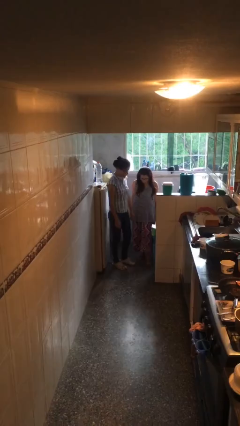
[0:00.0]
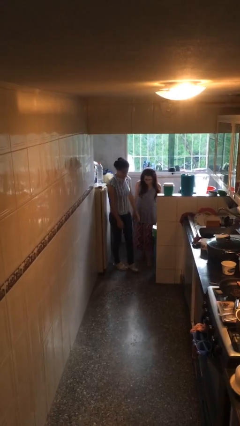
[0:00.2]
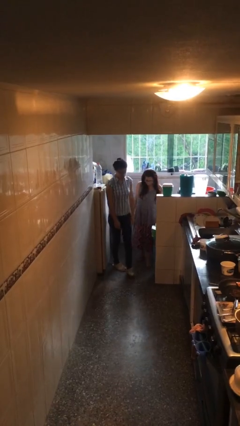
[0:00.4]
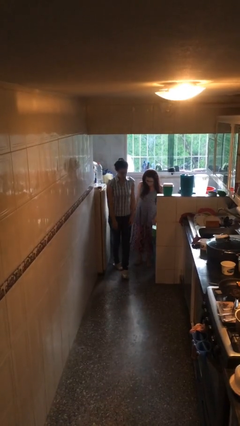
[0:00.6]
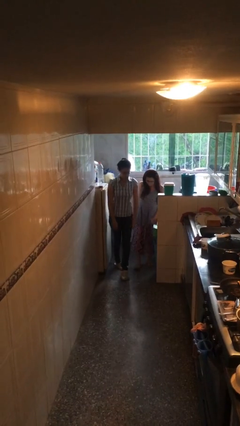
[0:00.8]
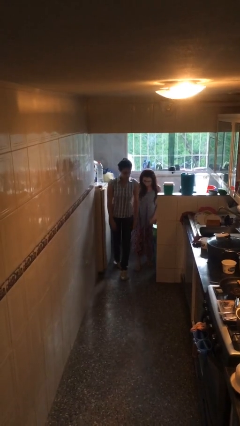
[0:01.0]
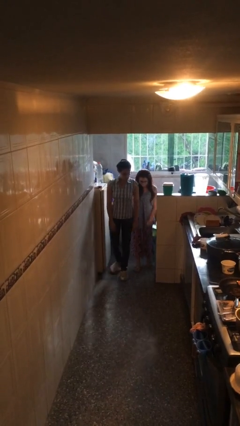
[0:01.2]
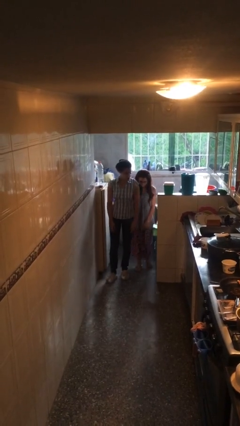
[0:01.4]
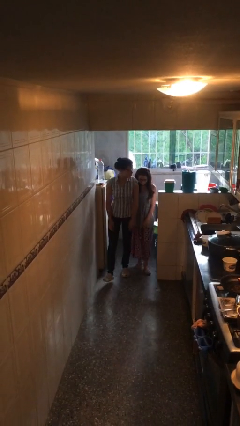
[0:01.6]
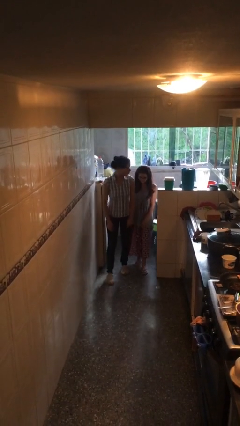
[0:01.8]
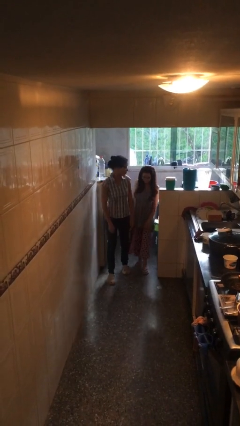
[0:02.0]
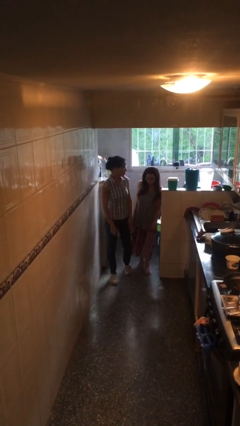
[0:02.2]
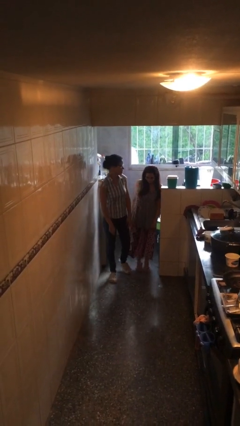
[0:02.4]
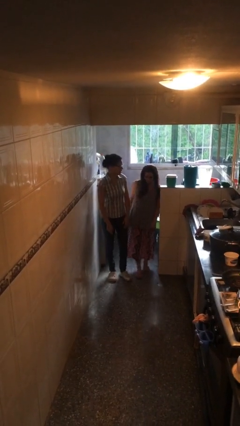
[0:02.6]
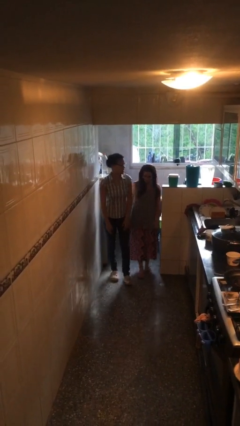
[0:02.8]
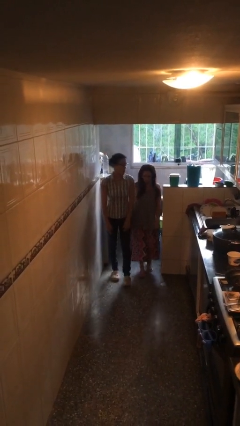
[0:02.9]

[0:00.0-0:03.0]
person talks to person

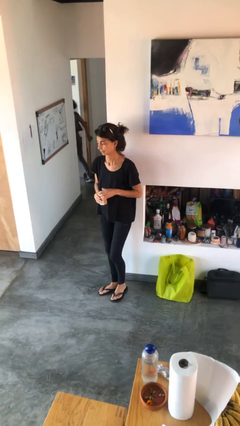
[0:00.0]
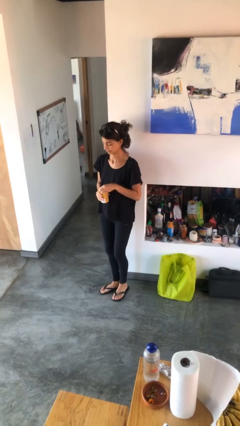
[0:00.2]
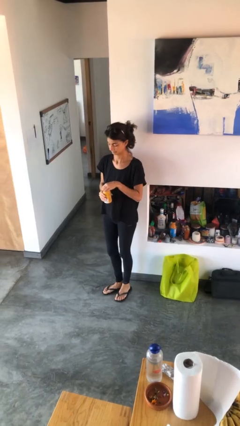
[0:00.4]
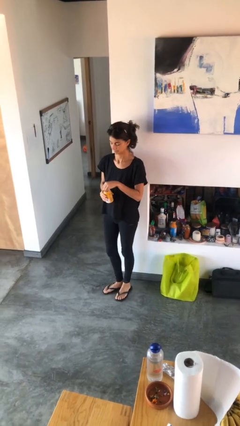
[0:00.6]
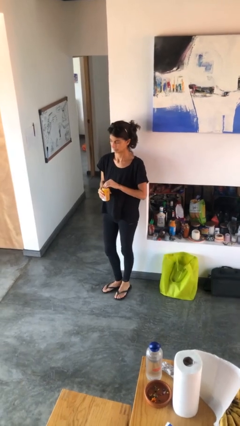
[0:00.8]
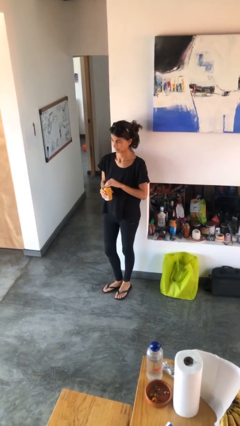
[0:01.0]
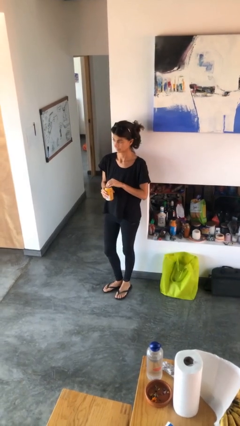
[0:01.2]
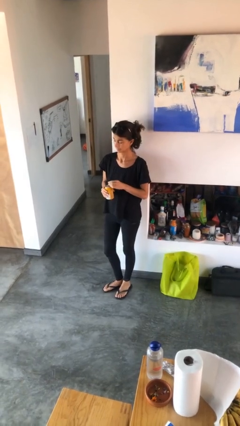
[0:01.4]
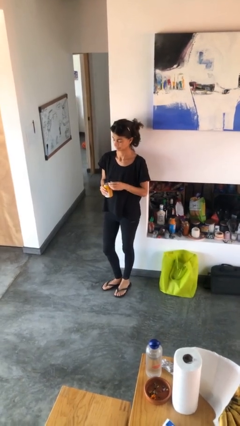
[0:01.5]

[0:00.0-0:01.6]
person opens beverage can

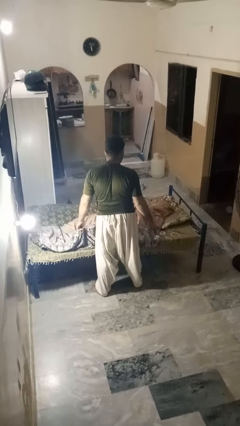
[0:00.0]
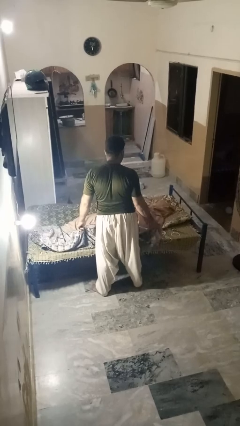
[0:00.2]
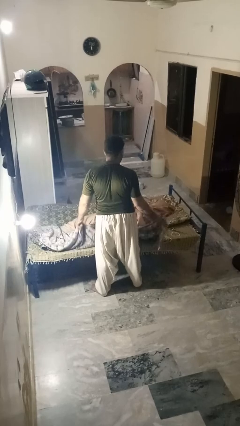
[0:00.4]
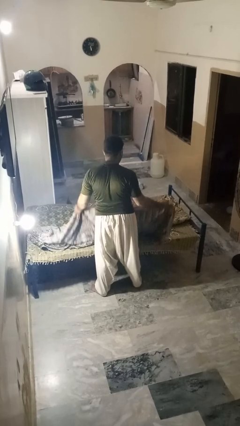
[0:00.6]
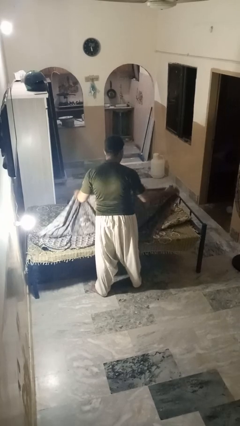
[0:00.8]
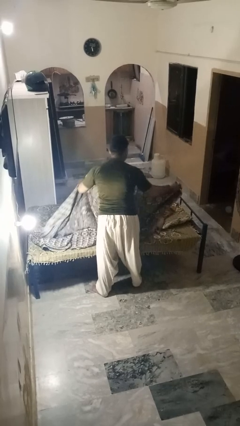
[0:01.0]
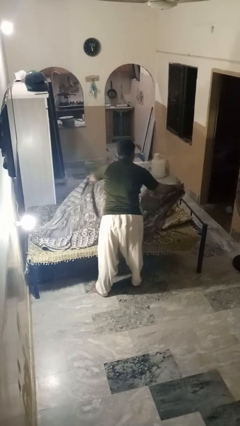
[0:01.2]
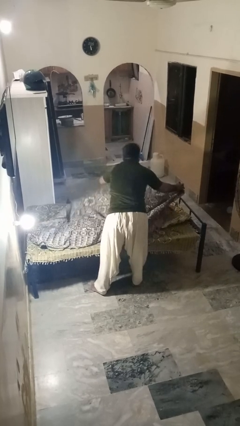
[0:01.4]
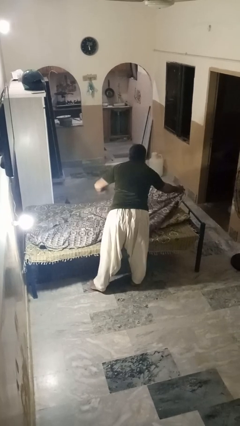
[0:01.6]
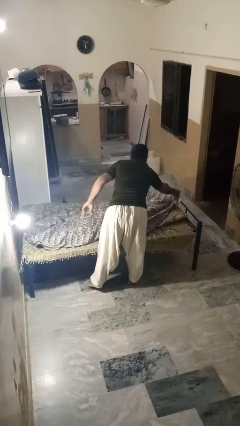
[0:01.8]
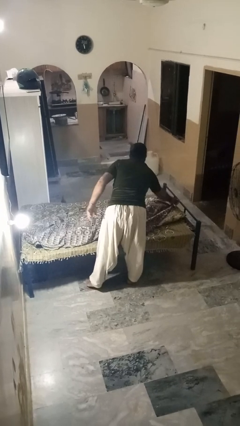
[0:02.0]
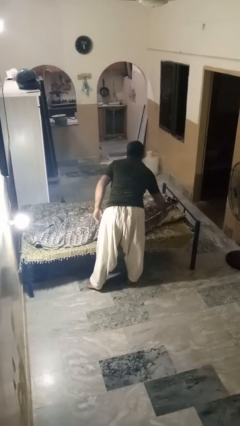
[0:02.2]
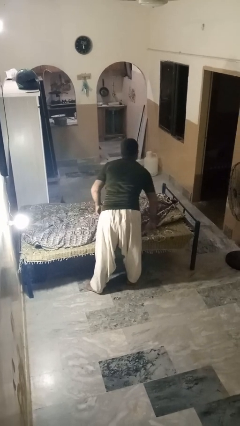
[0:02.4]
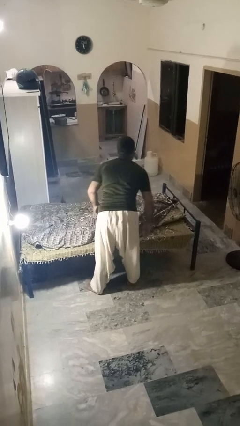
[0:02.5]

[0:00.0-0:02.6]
person covers friend with blanket

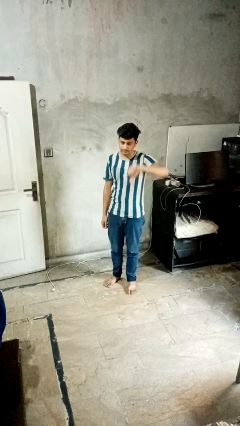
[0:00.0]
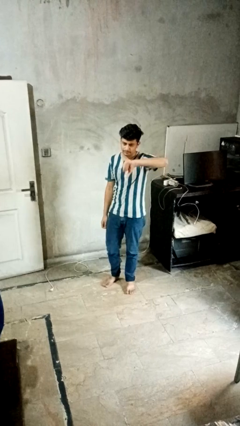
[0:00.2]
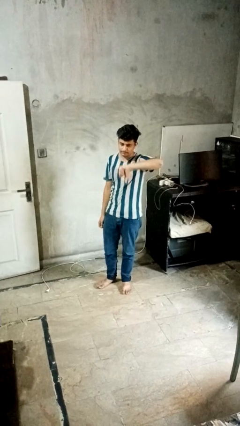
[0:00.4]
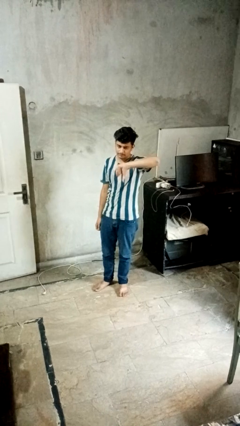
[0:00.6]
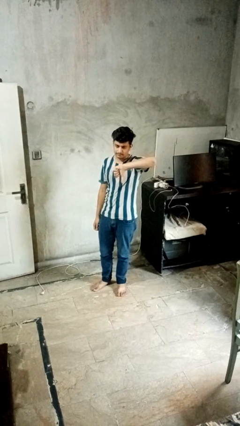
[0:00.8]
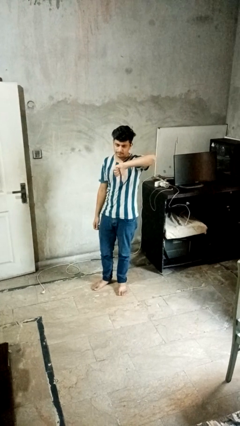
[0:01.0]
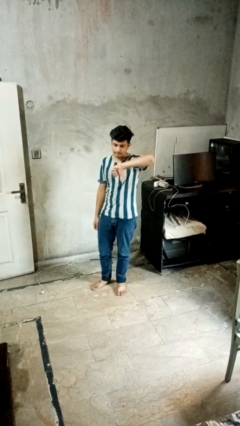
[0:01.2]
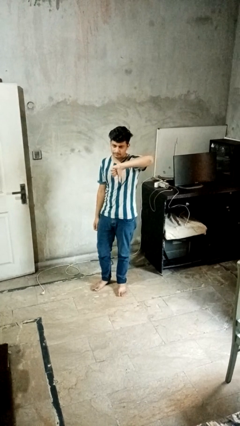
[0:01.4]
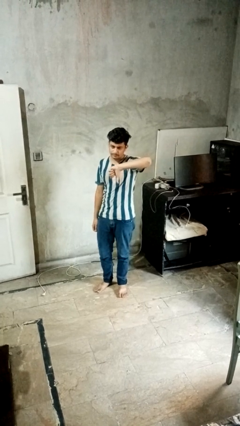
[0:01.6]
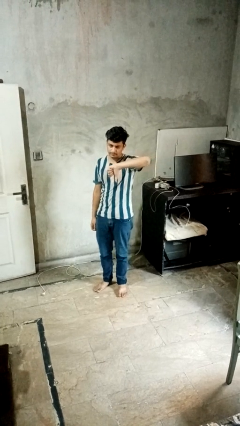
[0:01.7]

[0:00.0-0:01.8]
person gestures thumbs down

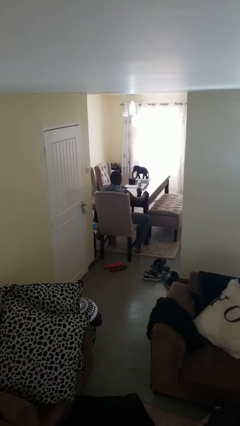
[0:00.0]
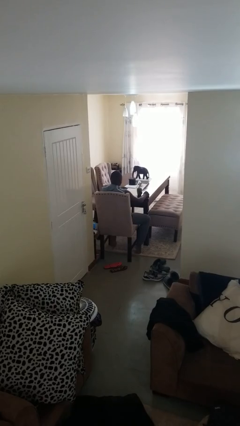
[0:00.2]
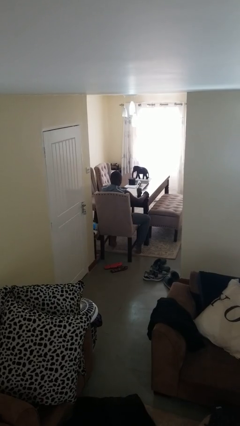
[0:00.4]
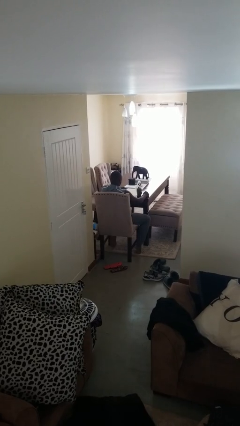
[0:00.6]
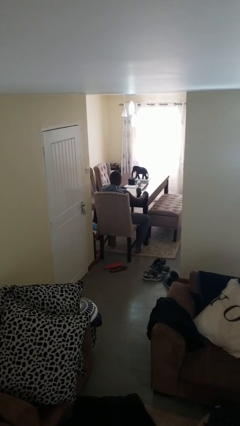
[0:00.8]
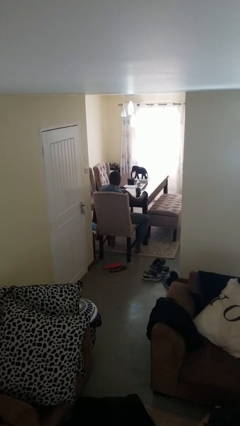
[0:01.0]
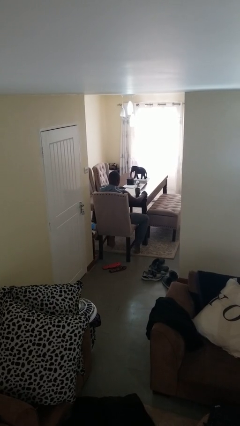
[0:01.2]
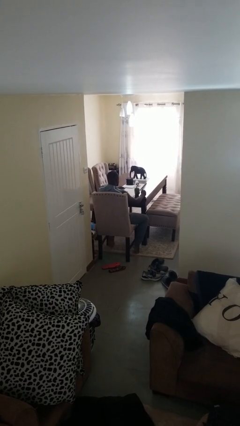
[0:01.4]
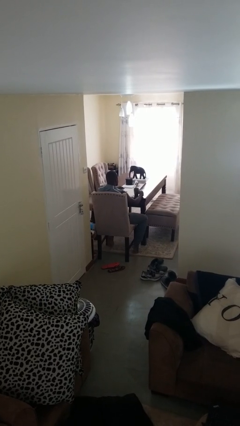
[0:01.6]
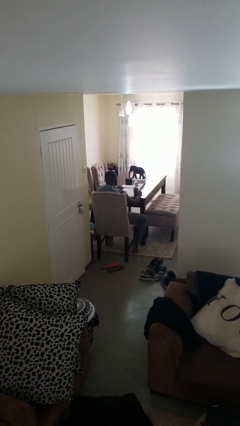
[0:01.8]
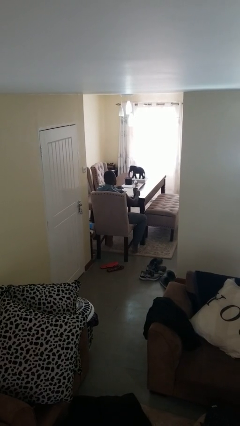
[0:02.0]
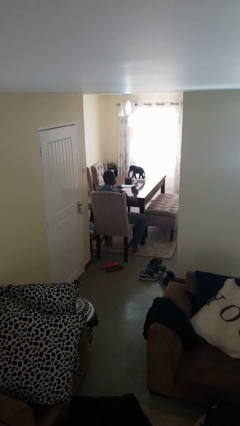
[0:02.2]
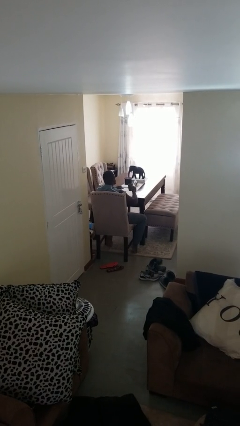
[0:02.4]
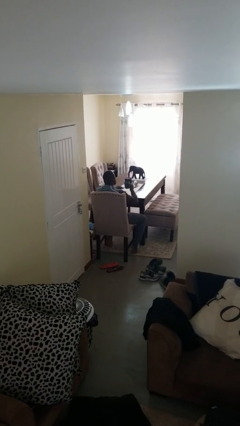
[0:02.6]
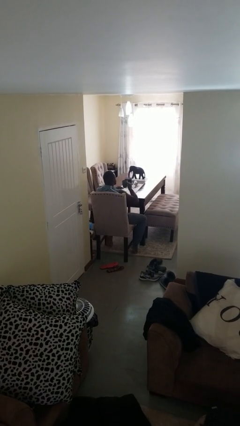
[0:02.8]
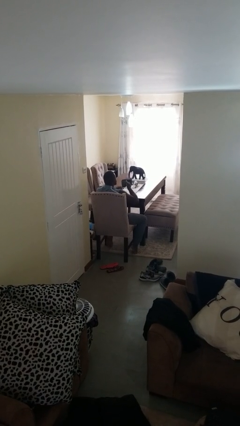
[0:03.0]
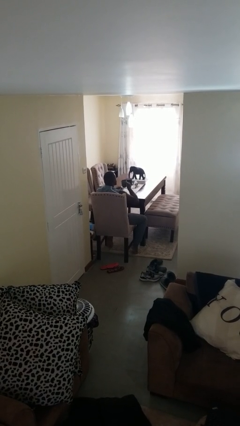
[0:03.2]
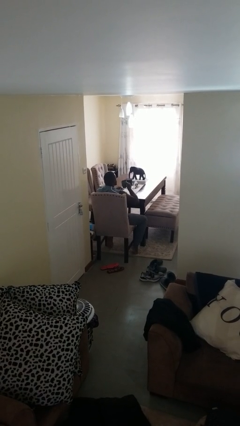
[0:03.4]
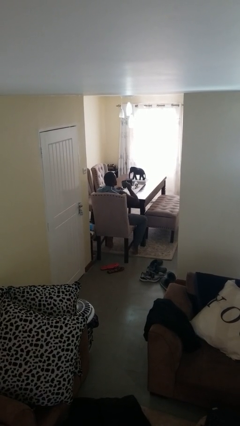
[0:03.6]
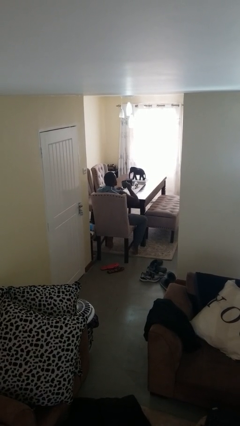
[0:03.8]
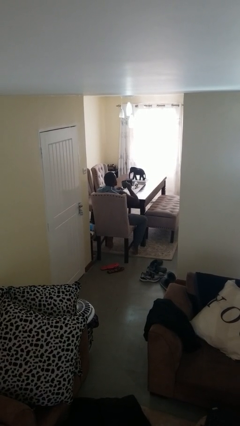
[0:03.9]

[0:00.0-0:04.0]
person picks up object from table

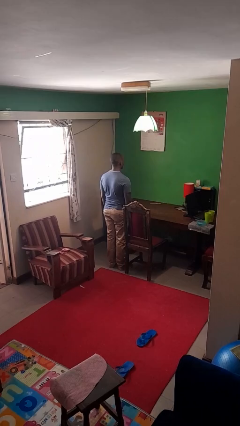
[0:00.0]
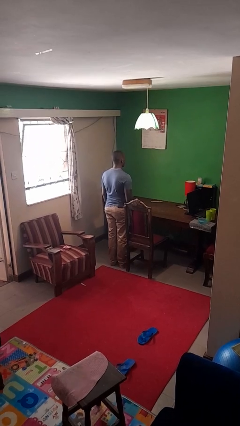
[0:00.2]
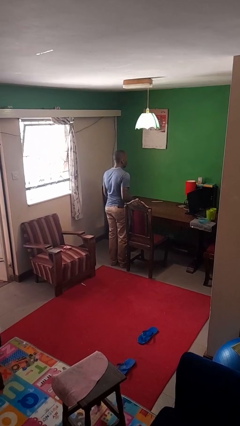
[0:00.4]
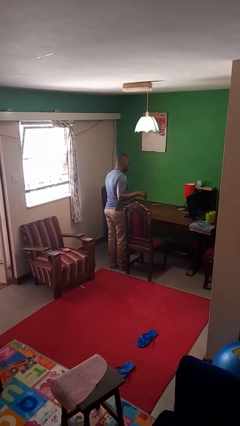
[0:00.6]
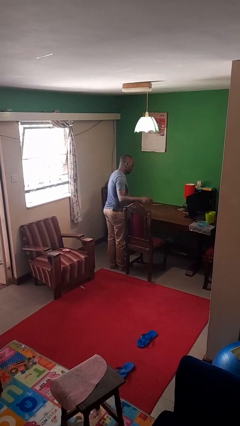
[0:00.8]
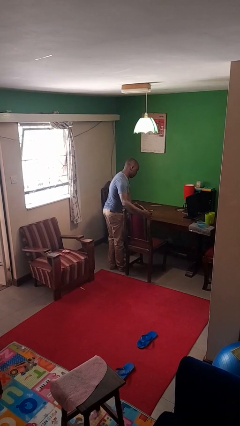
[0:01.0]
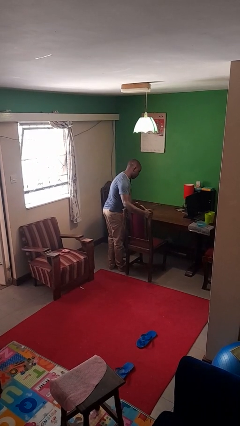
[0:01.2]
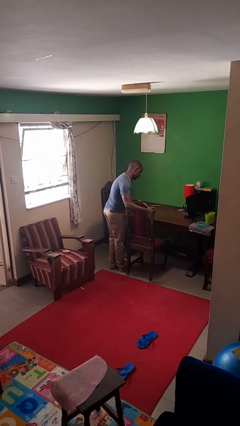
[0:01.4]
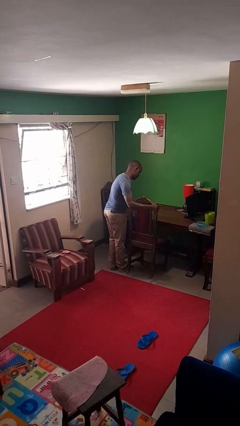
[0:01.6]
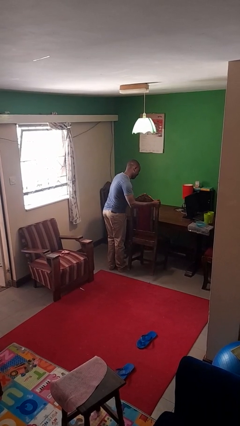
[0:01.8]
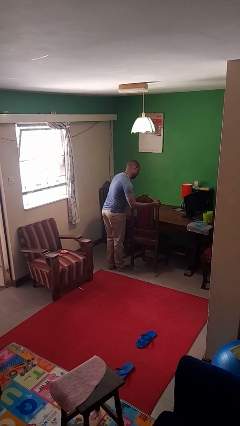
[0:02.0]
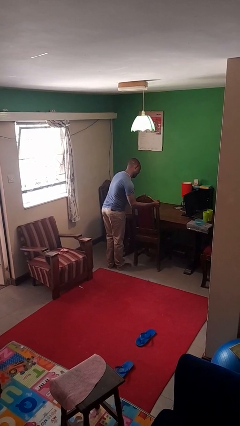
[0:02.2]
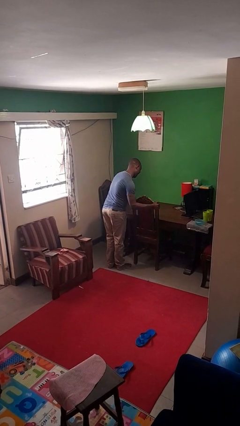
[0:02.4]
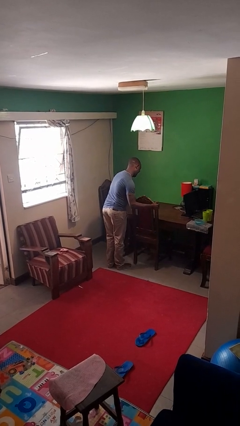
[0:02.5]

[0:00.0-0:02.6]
person pushes in chair

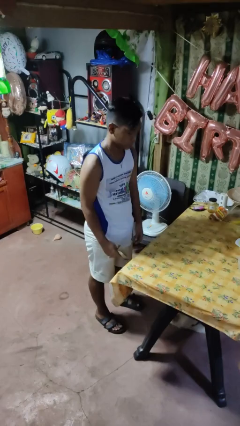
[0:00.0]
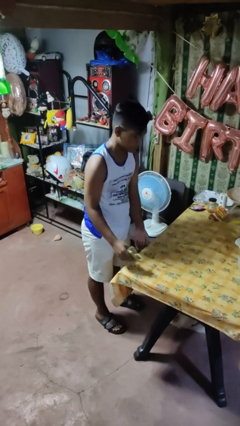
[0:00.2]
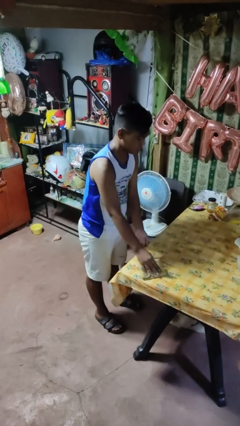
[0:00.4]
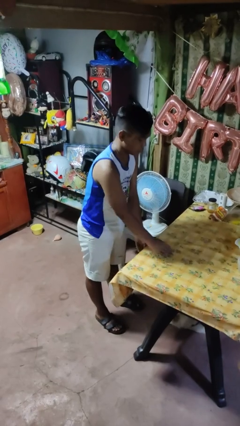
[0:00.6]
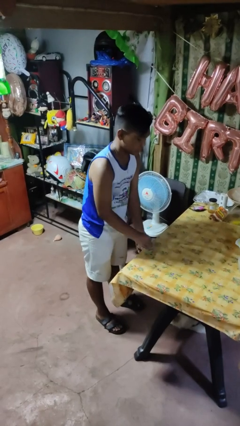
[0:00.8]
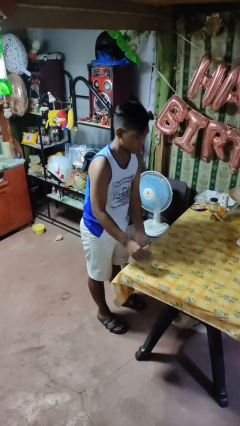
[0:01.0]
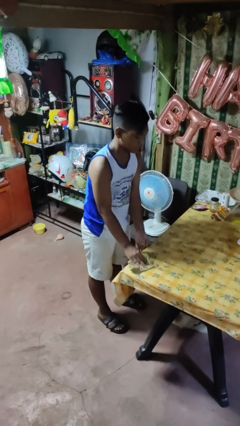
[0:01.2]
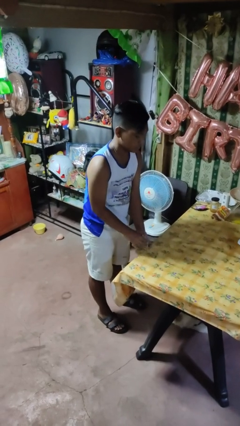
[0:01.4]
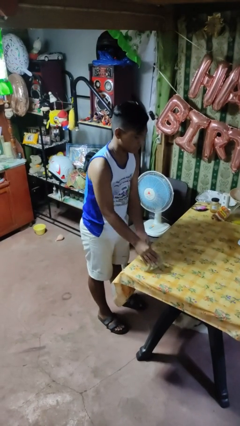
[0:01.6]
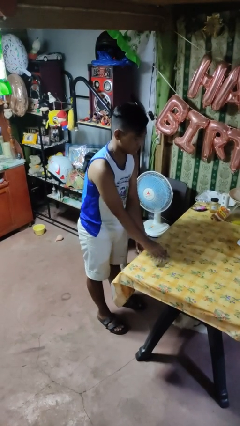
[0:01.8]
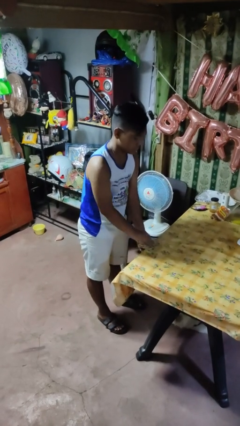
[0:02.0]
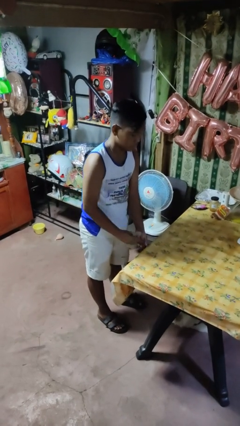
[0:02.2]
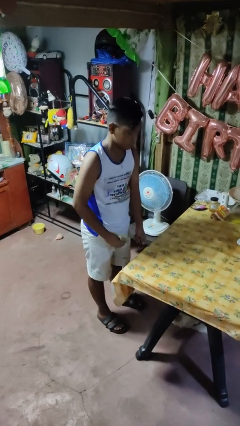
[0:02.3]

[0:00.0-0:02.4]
person cleans table with rag
